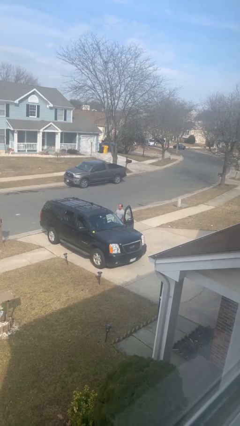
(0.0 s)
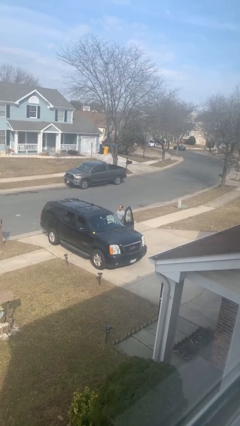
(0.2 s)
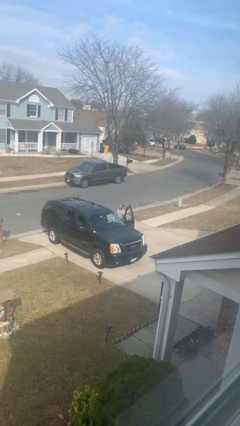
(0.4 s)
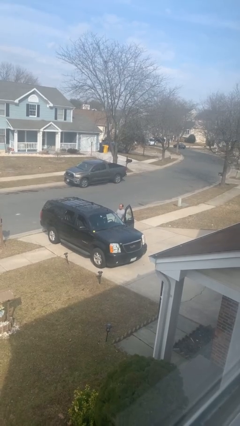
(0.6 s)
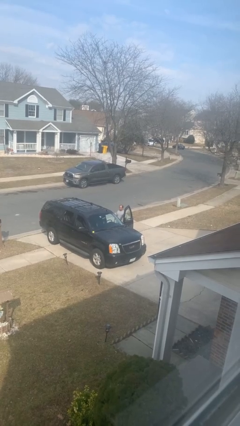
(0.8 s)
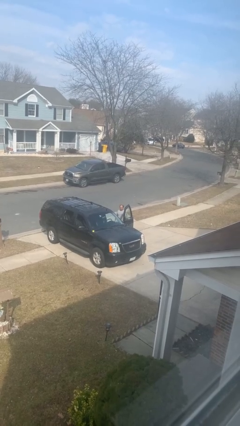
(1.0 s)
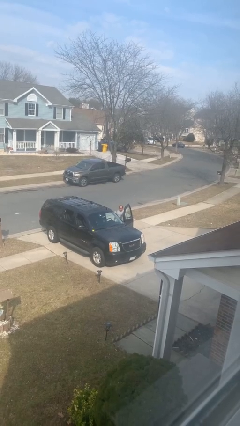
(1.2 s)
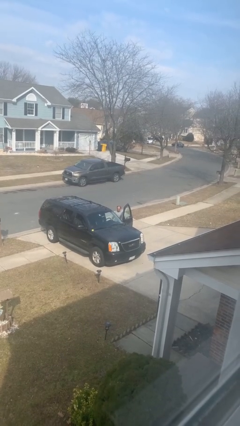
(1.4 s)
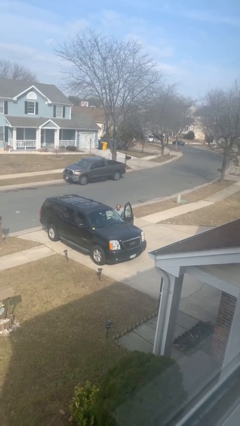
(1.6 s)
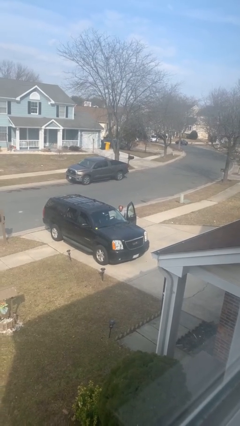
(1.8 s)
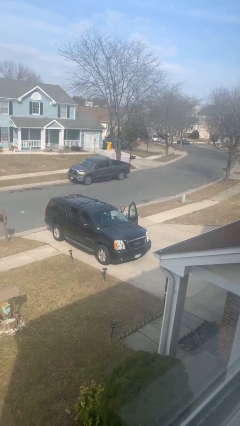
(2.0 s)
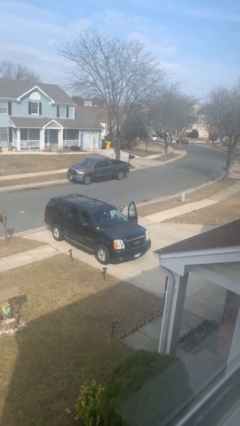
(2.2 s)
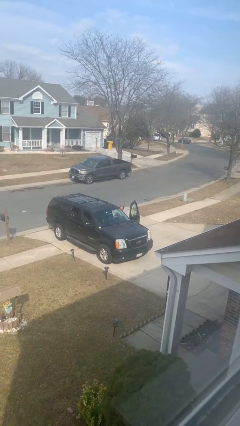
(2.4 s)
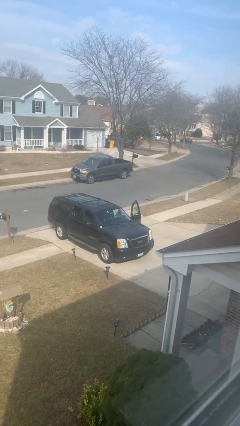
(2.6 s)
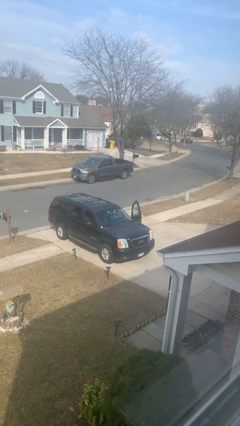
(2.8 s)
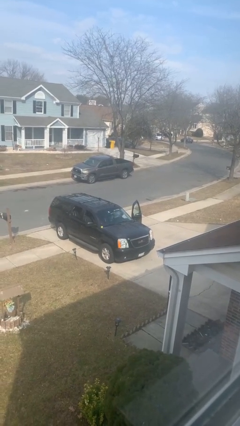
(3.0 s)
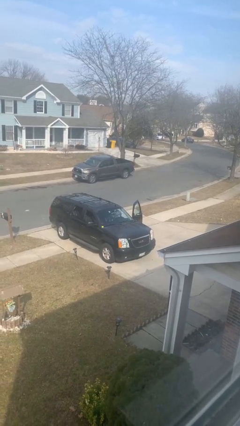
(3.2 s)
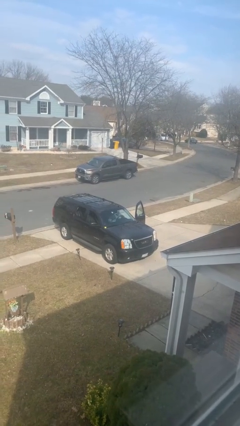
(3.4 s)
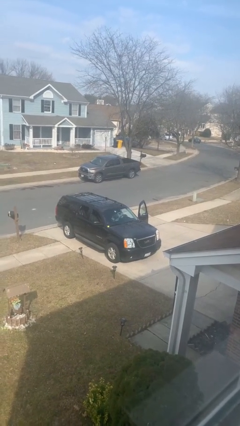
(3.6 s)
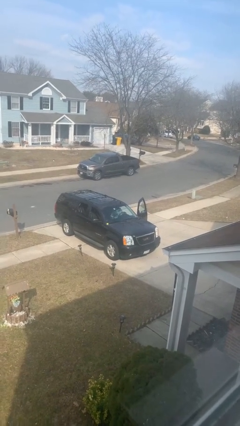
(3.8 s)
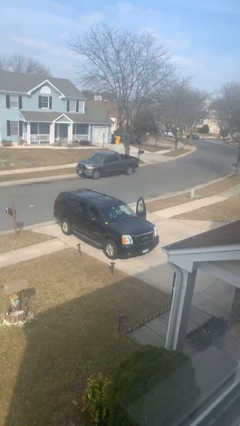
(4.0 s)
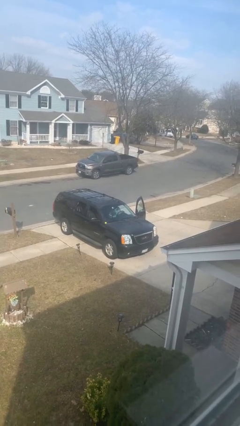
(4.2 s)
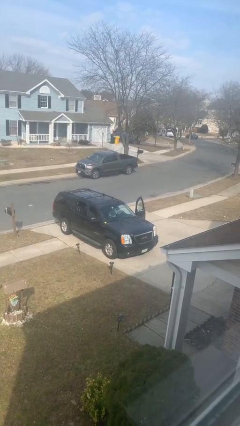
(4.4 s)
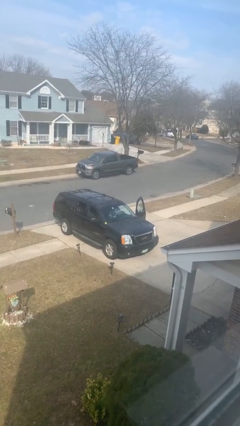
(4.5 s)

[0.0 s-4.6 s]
person enters car

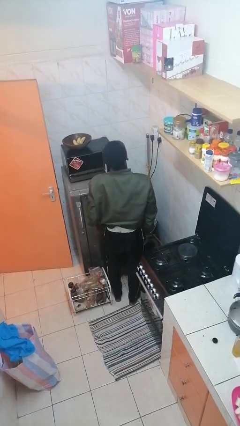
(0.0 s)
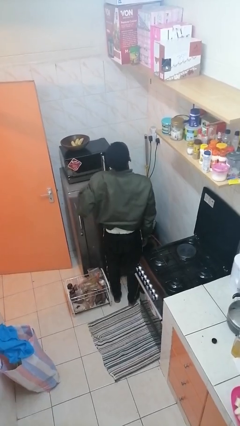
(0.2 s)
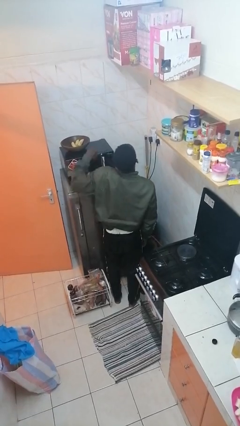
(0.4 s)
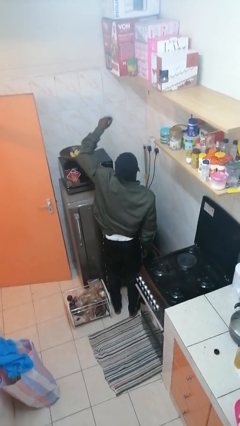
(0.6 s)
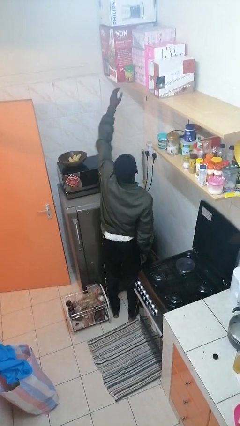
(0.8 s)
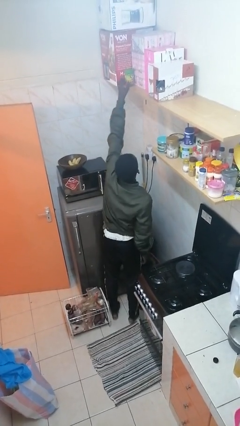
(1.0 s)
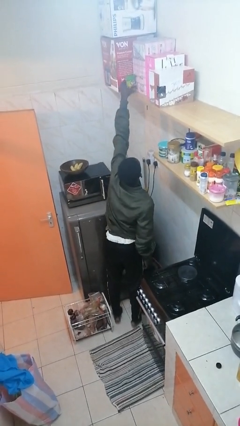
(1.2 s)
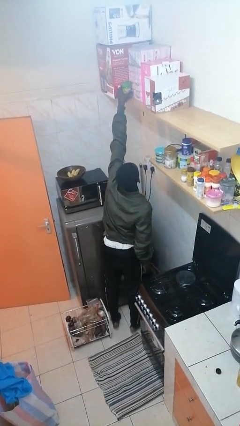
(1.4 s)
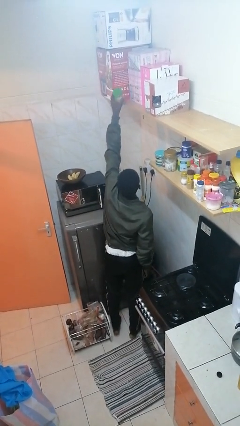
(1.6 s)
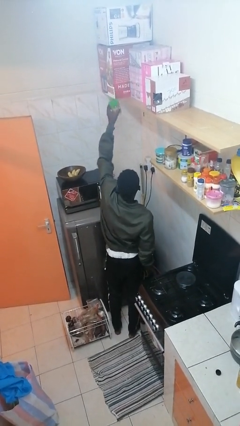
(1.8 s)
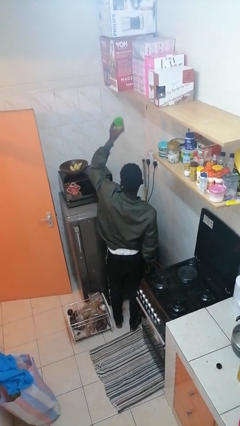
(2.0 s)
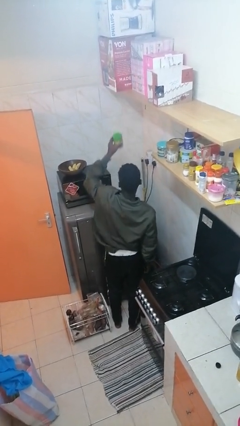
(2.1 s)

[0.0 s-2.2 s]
person picks up object from shelf

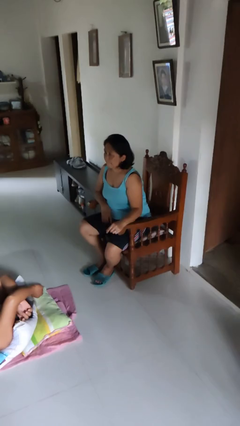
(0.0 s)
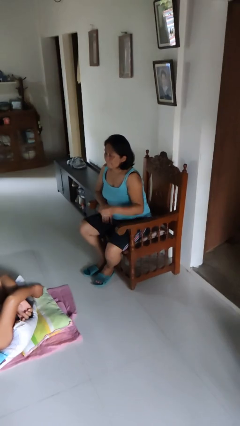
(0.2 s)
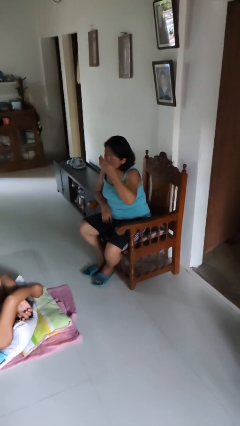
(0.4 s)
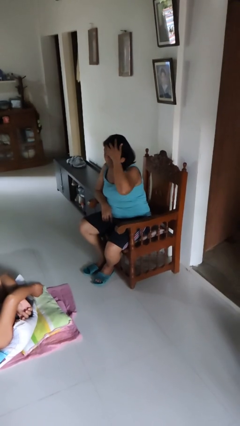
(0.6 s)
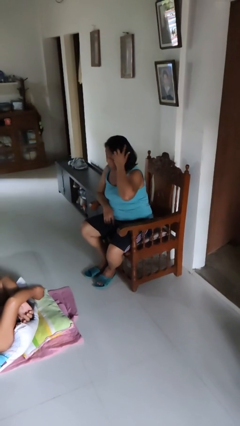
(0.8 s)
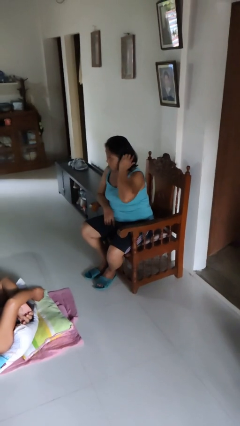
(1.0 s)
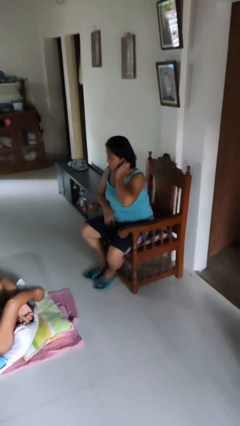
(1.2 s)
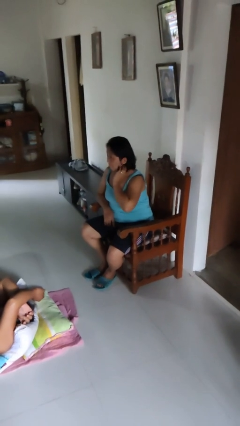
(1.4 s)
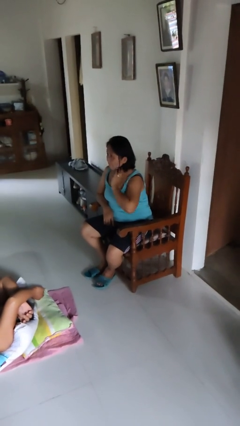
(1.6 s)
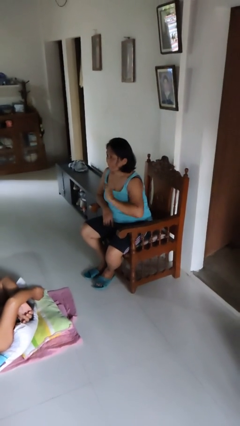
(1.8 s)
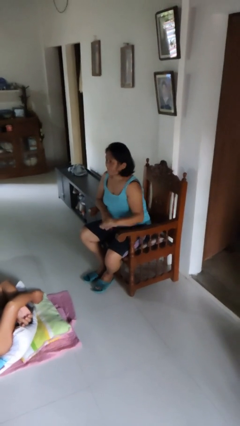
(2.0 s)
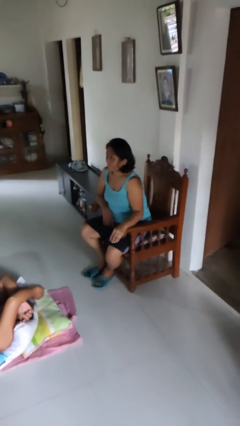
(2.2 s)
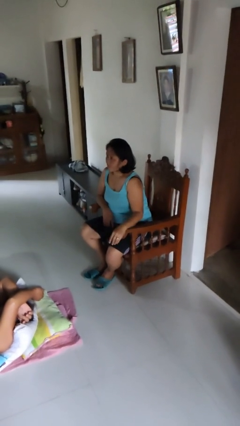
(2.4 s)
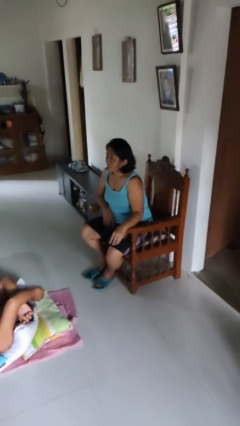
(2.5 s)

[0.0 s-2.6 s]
person strokes hair

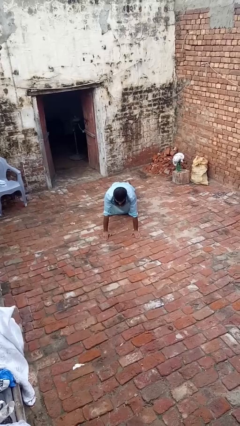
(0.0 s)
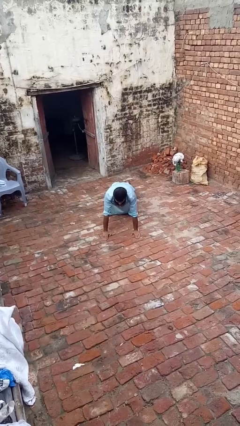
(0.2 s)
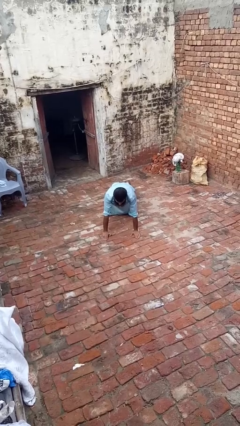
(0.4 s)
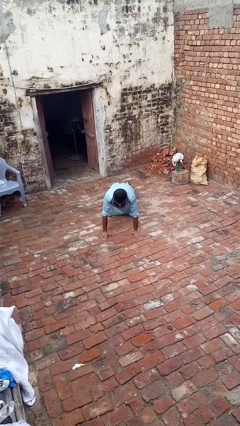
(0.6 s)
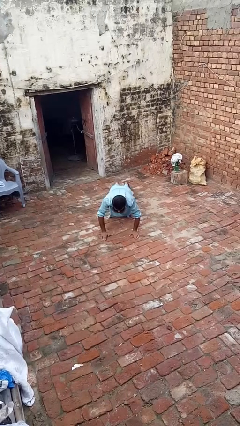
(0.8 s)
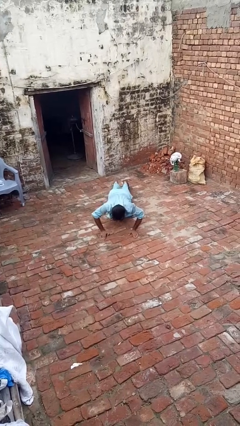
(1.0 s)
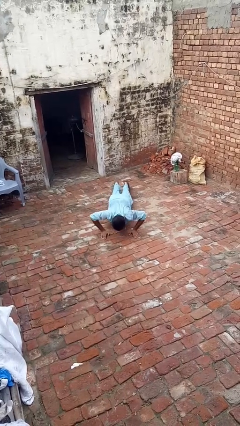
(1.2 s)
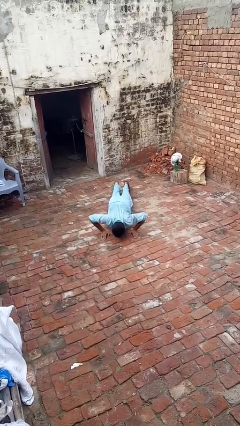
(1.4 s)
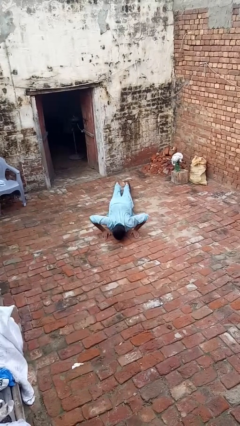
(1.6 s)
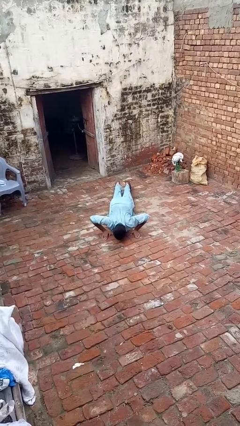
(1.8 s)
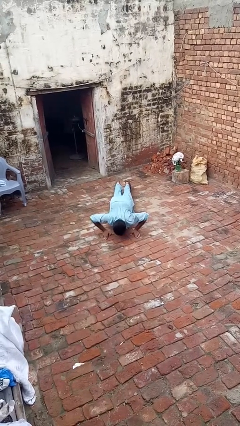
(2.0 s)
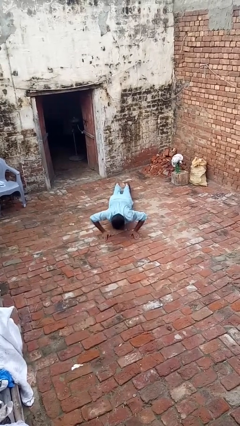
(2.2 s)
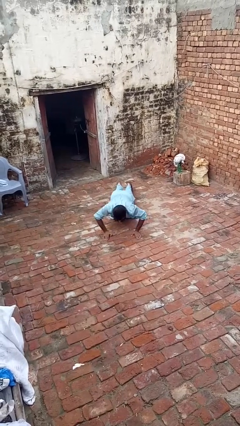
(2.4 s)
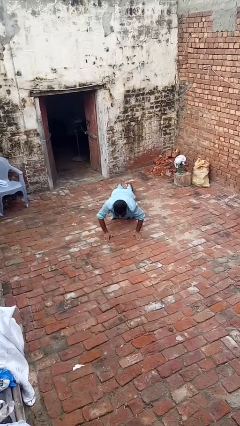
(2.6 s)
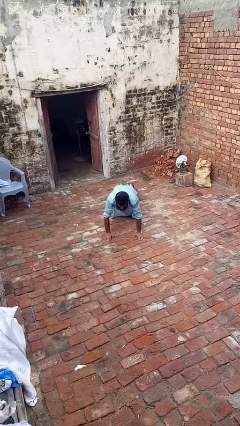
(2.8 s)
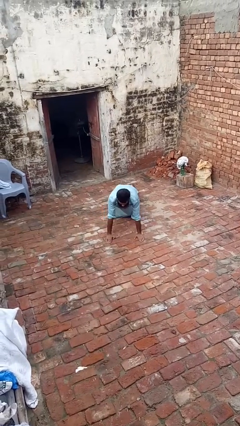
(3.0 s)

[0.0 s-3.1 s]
person exercises with pushup

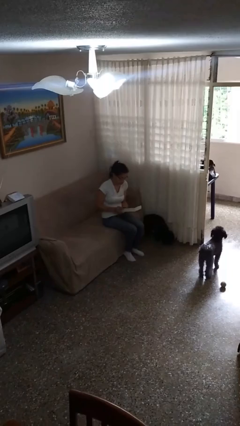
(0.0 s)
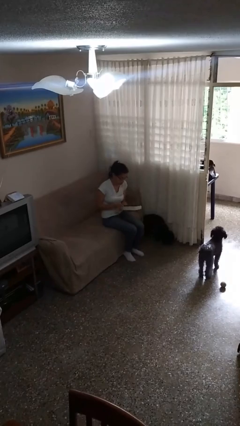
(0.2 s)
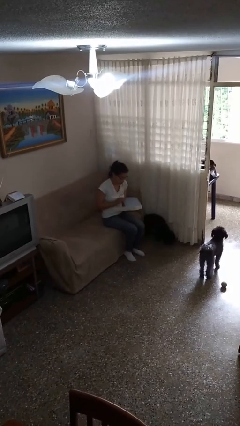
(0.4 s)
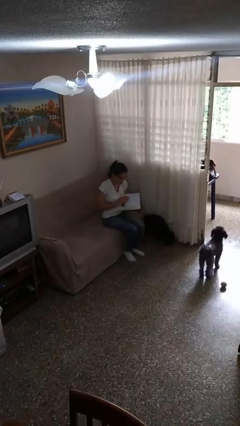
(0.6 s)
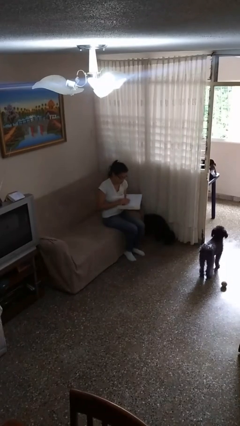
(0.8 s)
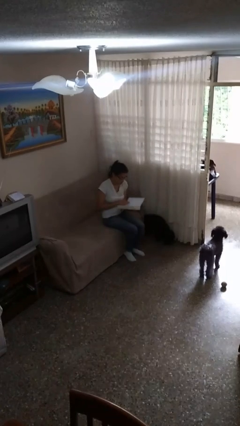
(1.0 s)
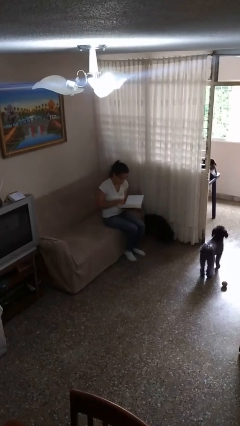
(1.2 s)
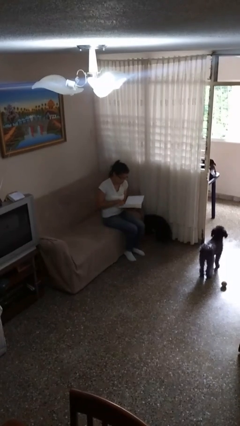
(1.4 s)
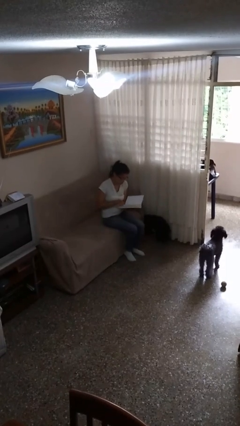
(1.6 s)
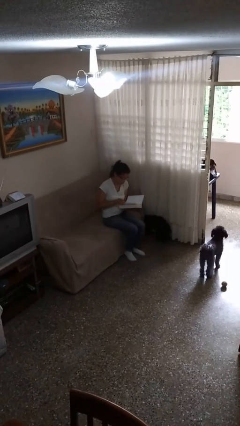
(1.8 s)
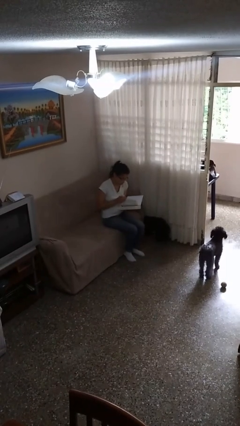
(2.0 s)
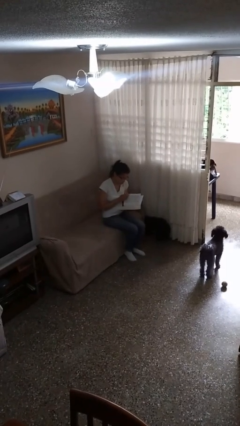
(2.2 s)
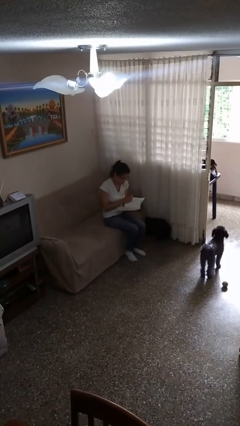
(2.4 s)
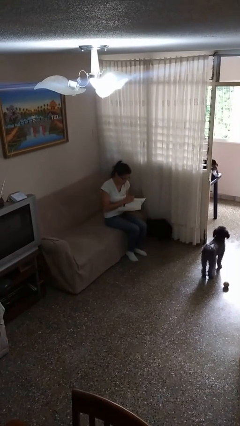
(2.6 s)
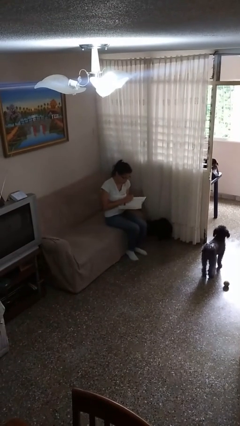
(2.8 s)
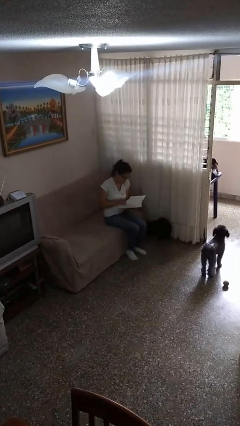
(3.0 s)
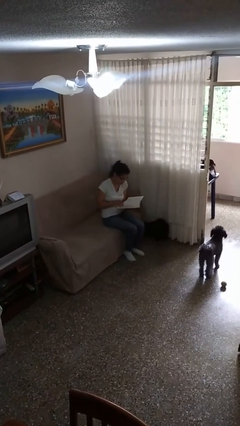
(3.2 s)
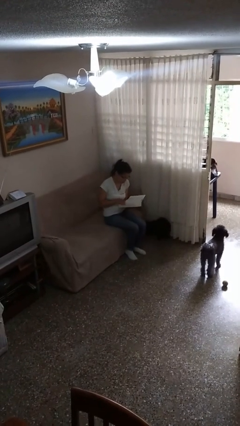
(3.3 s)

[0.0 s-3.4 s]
person reads book

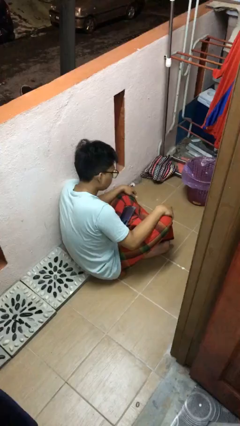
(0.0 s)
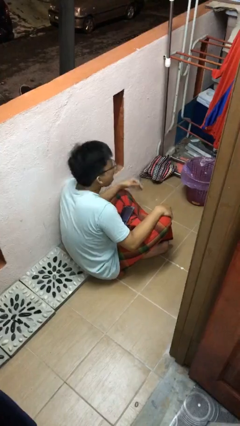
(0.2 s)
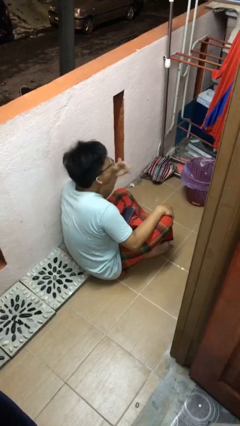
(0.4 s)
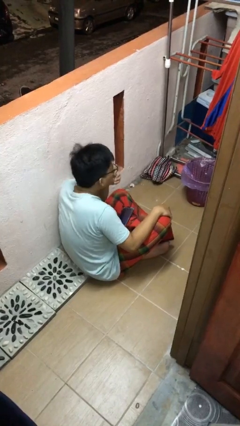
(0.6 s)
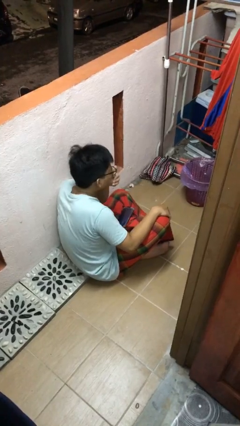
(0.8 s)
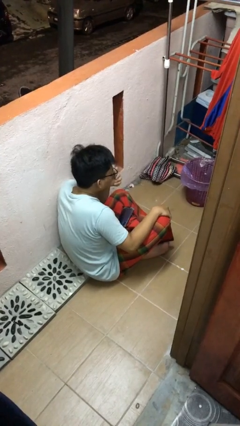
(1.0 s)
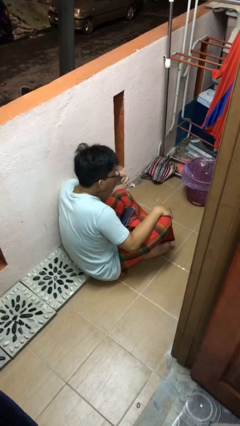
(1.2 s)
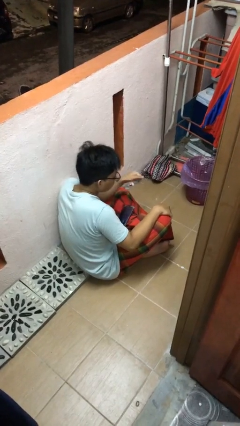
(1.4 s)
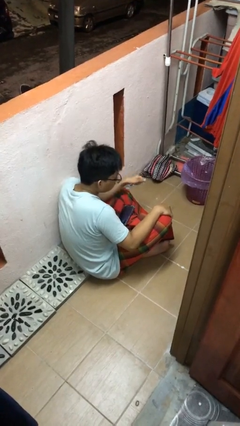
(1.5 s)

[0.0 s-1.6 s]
person sneezes into hand
